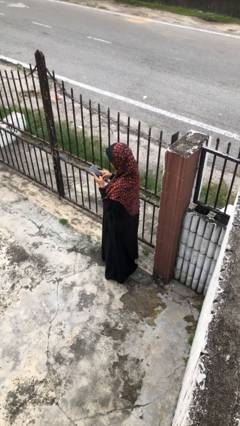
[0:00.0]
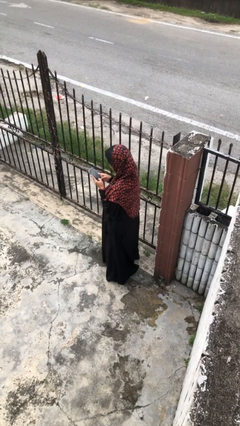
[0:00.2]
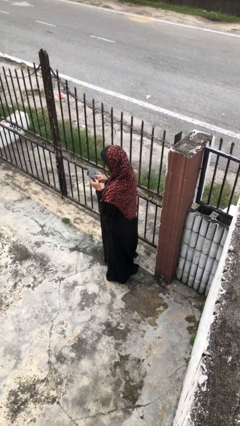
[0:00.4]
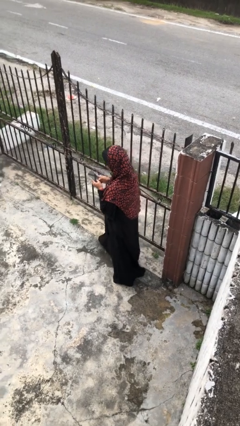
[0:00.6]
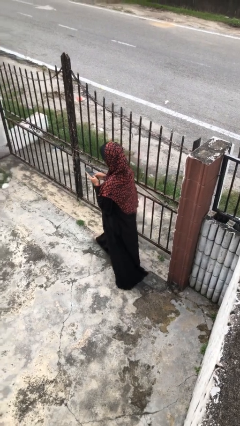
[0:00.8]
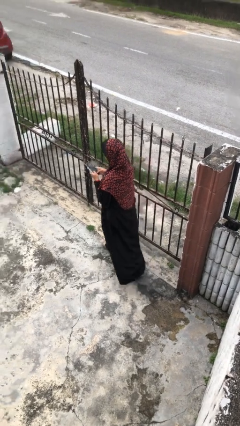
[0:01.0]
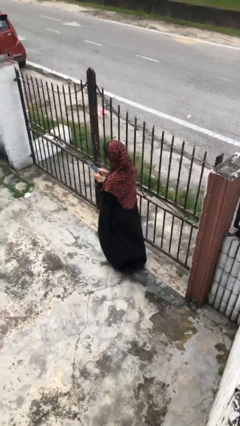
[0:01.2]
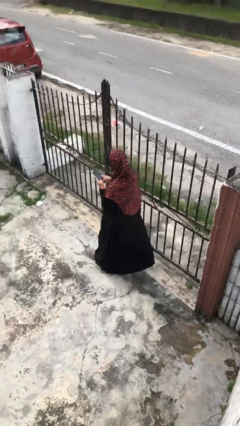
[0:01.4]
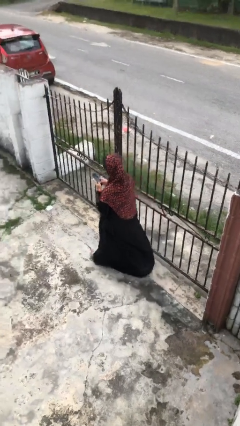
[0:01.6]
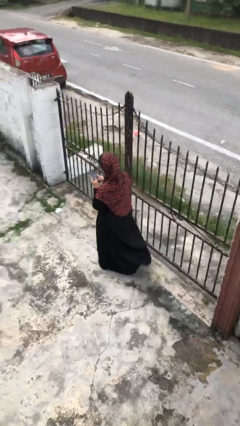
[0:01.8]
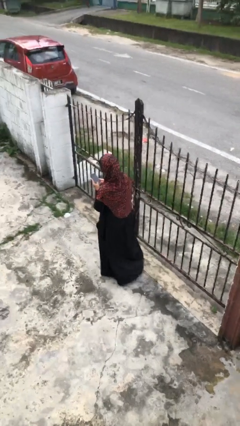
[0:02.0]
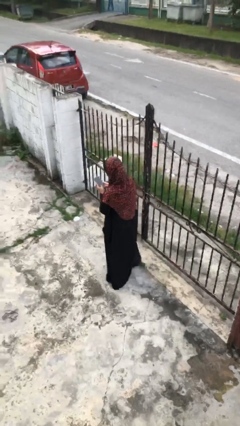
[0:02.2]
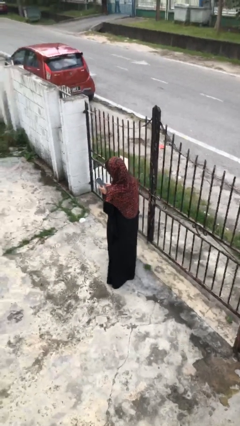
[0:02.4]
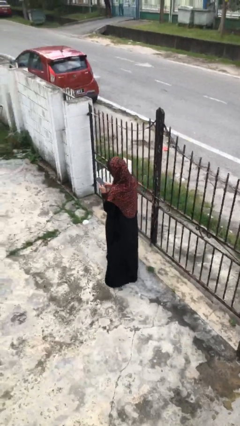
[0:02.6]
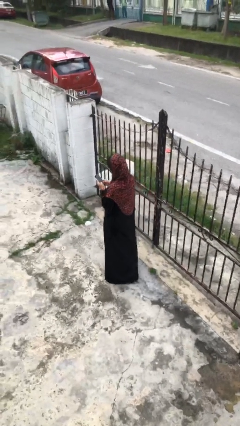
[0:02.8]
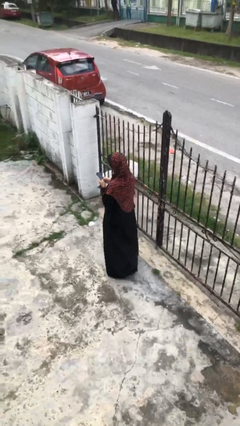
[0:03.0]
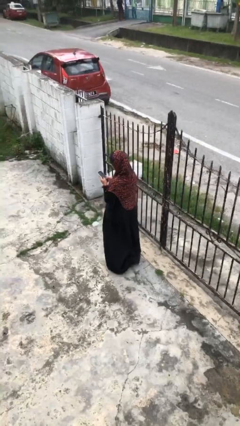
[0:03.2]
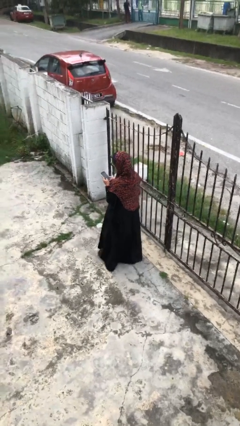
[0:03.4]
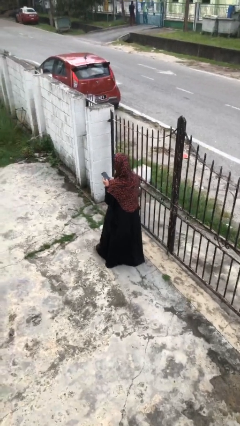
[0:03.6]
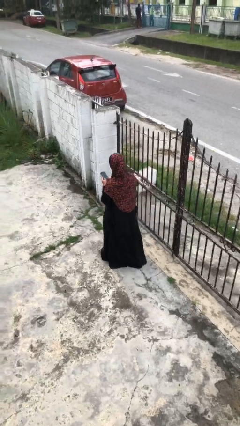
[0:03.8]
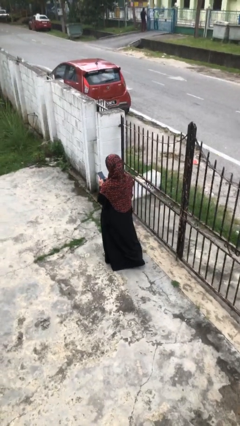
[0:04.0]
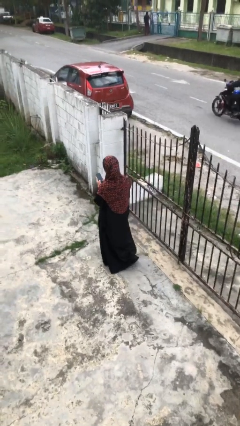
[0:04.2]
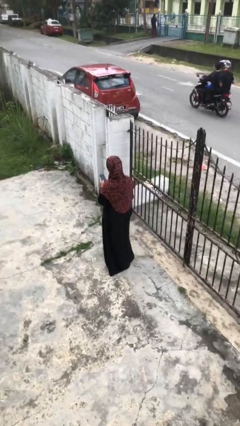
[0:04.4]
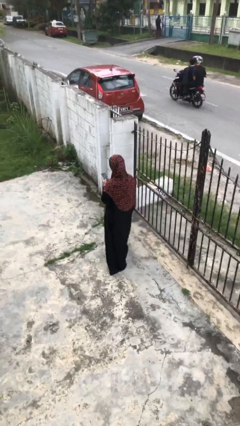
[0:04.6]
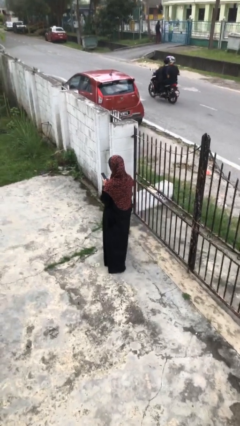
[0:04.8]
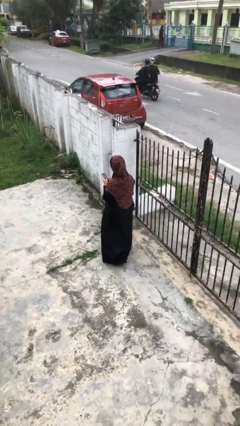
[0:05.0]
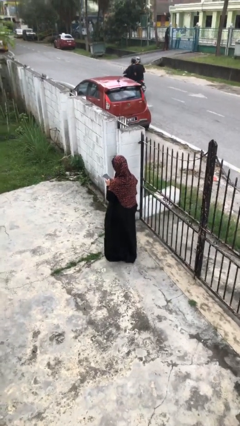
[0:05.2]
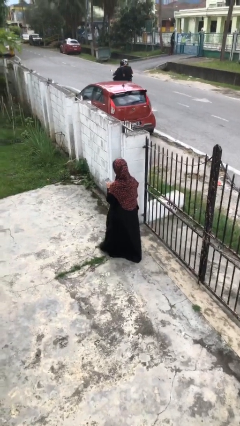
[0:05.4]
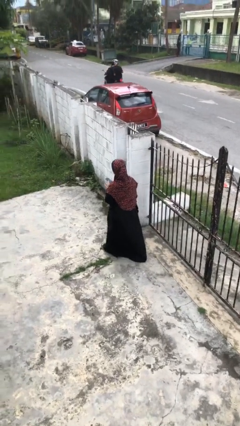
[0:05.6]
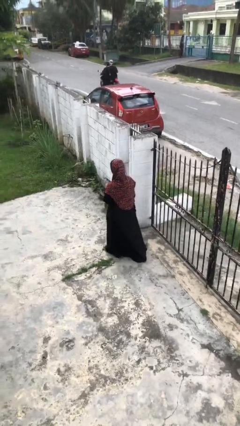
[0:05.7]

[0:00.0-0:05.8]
person texts on phone

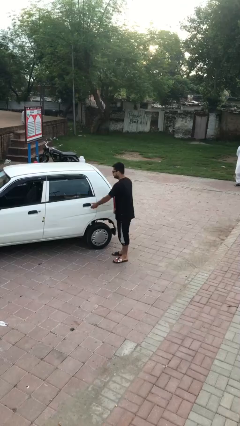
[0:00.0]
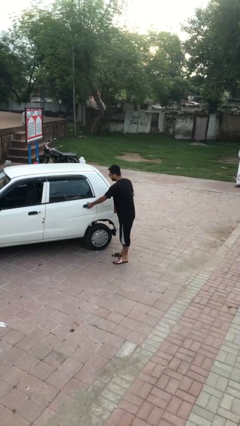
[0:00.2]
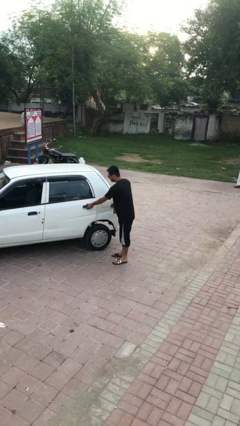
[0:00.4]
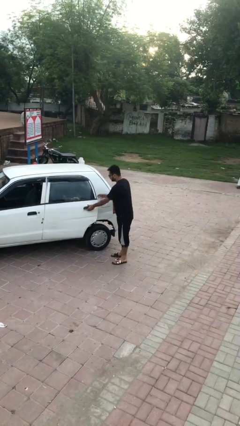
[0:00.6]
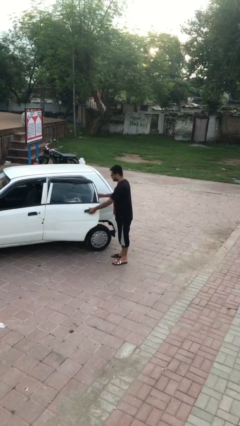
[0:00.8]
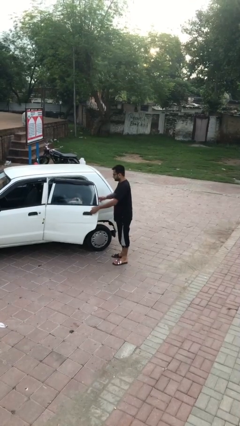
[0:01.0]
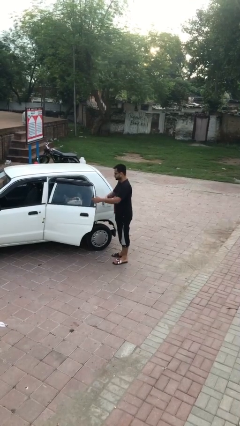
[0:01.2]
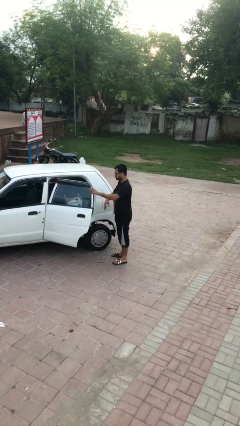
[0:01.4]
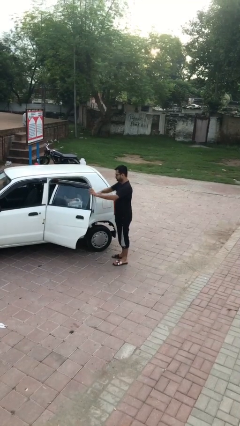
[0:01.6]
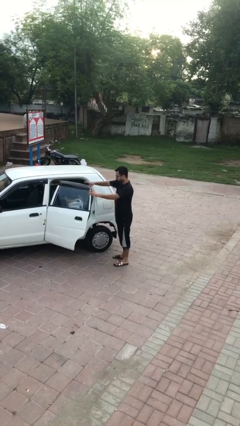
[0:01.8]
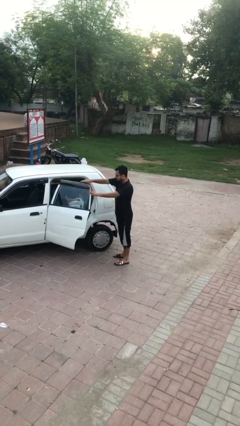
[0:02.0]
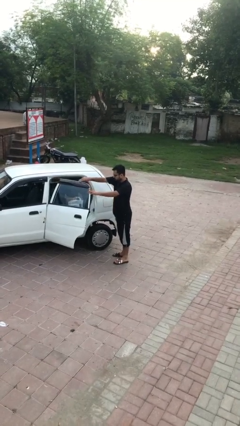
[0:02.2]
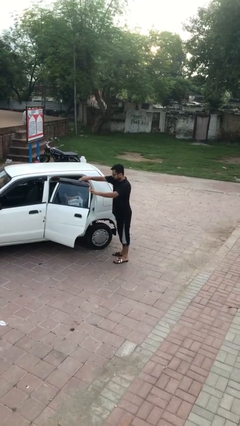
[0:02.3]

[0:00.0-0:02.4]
person opens car door

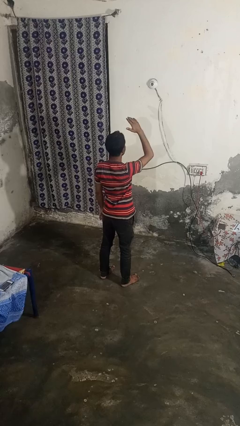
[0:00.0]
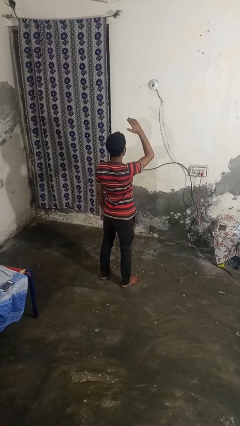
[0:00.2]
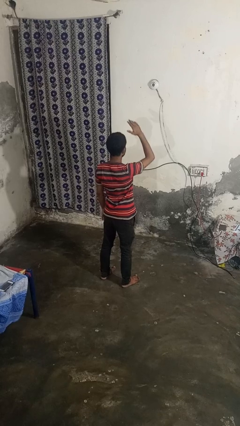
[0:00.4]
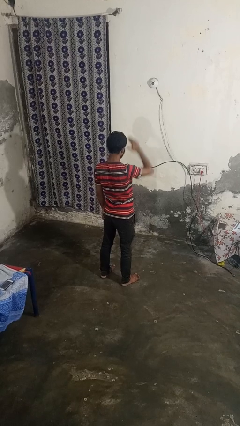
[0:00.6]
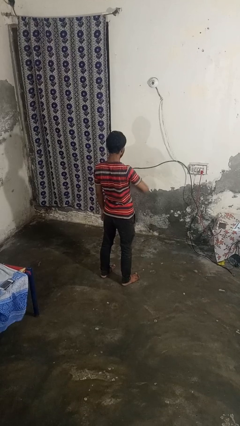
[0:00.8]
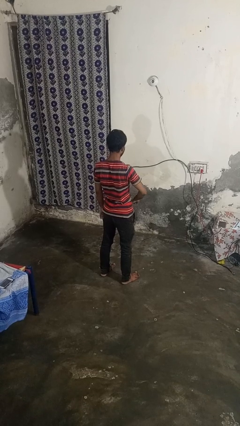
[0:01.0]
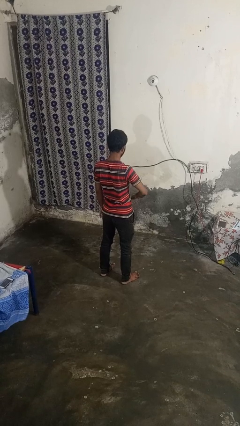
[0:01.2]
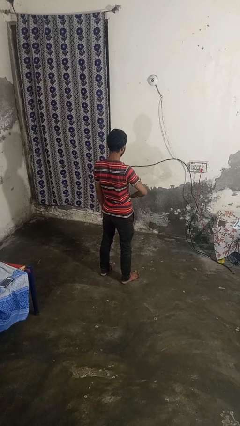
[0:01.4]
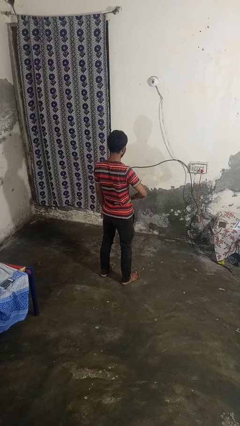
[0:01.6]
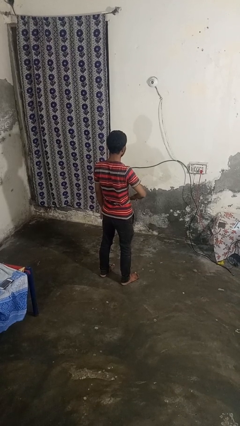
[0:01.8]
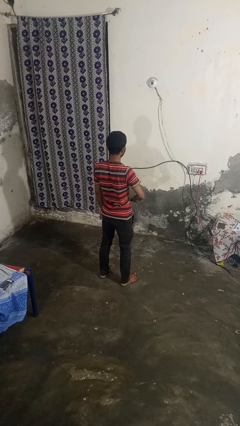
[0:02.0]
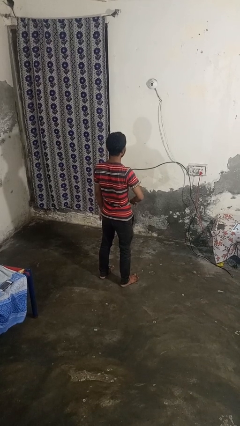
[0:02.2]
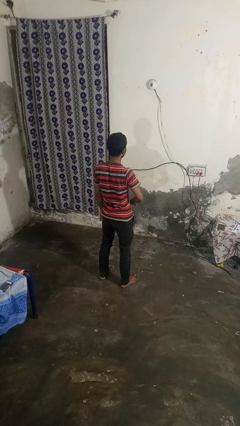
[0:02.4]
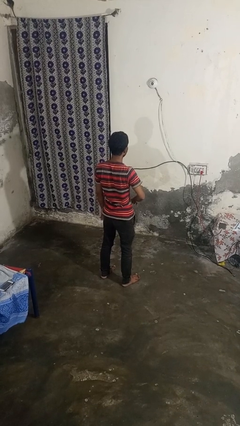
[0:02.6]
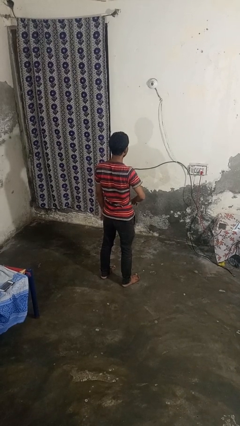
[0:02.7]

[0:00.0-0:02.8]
person gestures swipe down

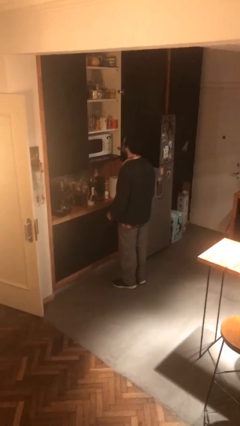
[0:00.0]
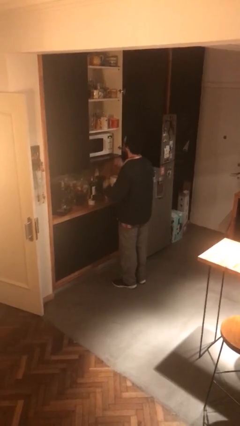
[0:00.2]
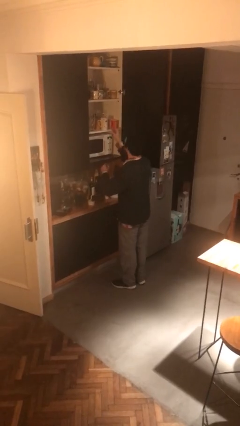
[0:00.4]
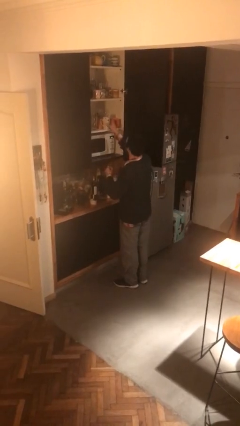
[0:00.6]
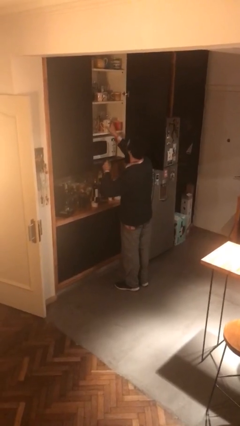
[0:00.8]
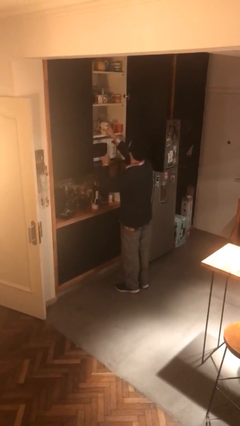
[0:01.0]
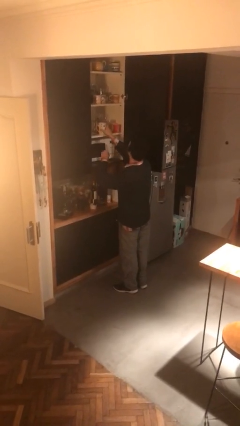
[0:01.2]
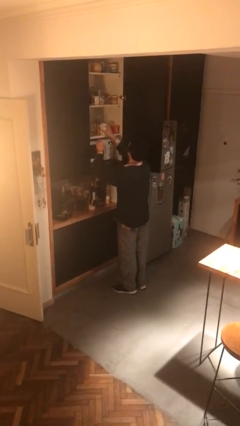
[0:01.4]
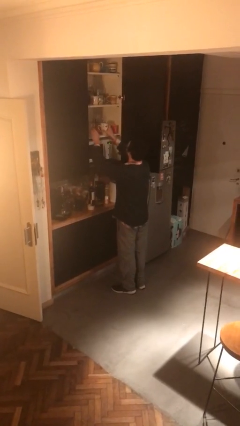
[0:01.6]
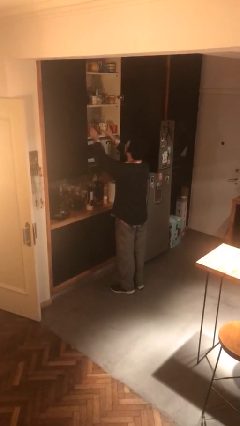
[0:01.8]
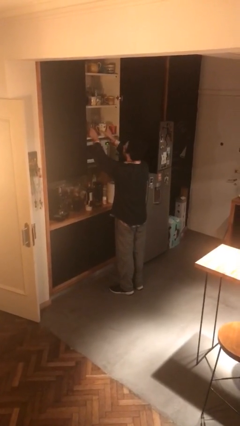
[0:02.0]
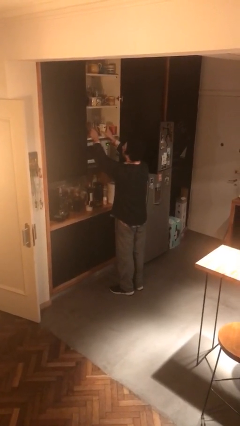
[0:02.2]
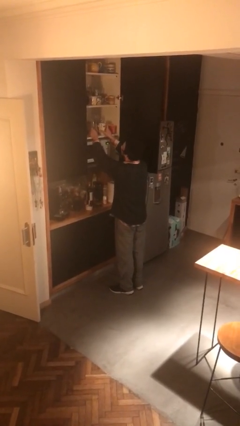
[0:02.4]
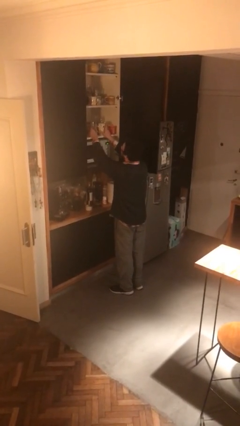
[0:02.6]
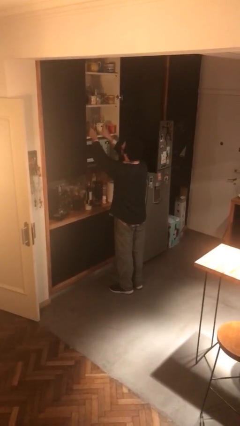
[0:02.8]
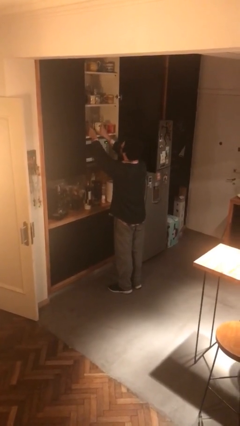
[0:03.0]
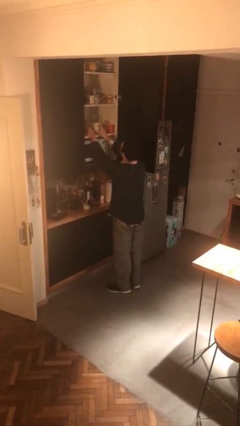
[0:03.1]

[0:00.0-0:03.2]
person searches in cabinet

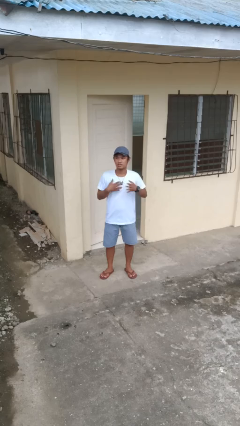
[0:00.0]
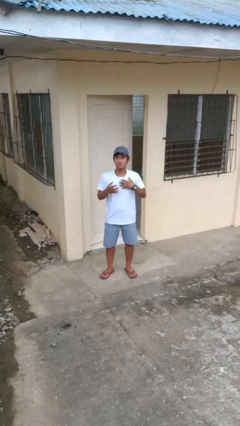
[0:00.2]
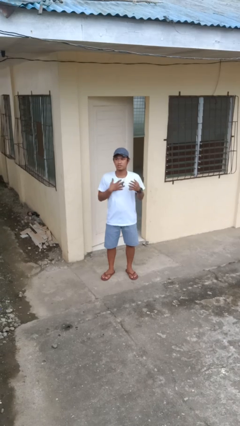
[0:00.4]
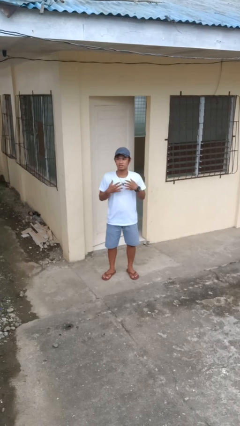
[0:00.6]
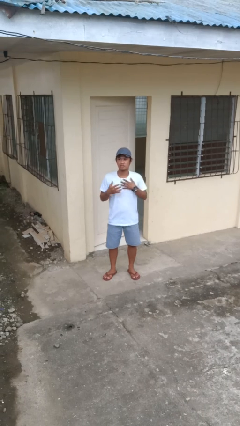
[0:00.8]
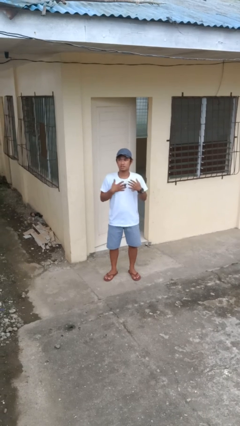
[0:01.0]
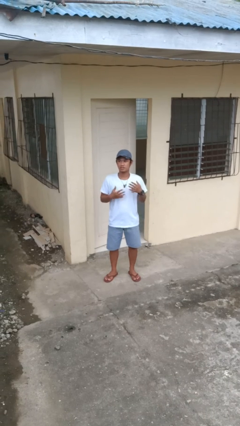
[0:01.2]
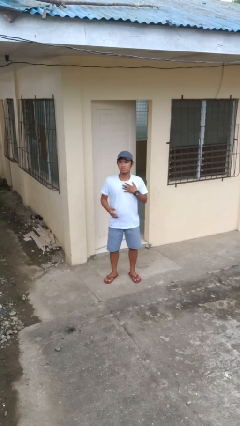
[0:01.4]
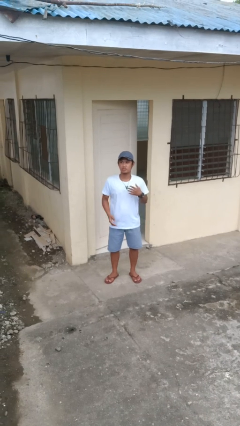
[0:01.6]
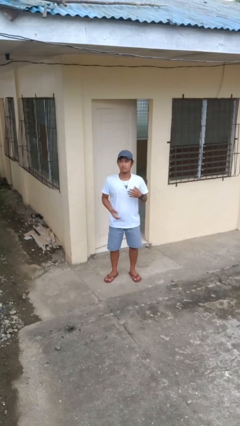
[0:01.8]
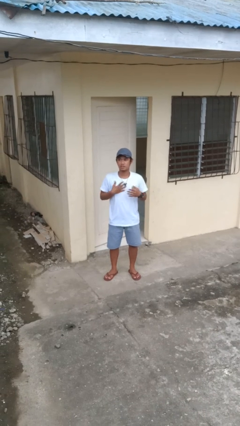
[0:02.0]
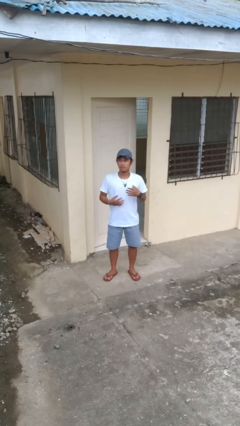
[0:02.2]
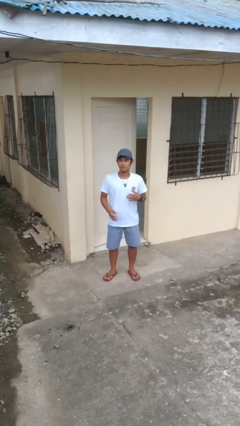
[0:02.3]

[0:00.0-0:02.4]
person drums on chest

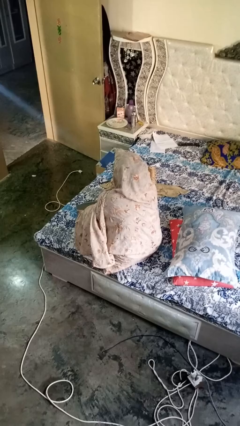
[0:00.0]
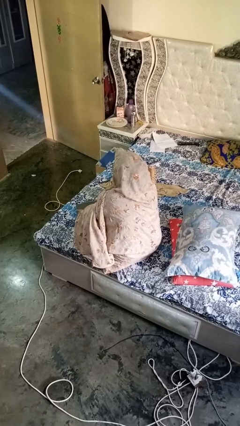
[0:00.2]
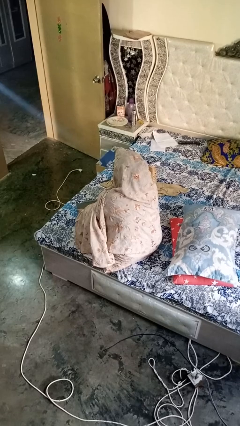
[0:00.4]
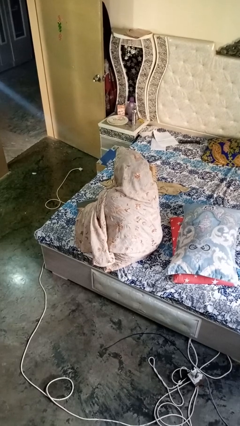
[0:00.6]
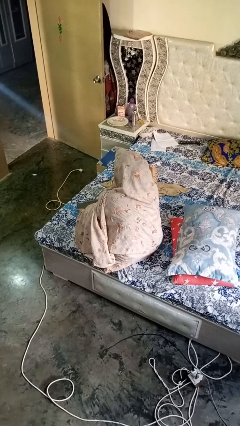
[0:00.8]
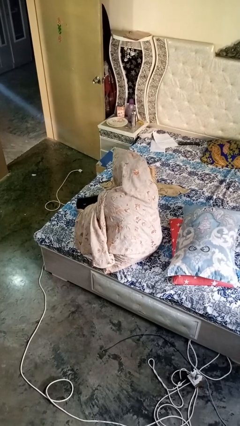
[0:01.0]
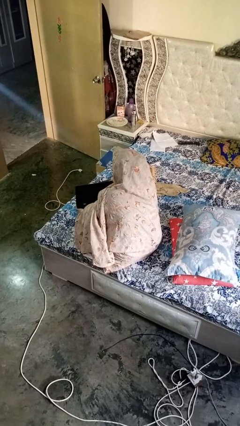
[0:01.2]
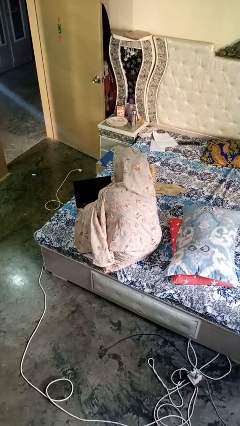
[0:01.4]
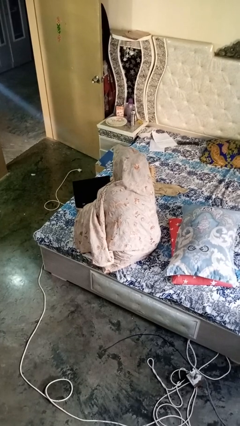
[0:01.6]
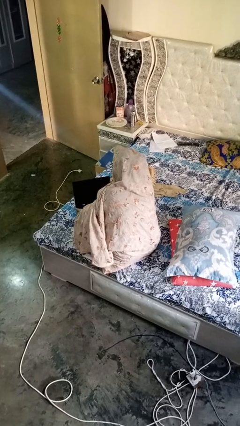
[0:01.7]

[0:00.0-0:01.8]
person opens laptop
